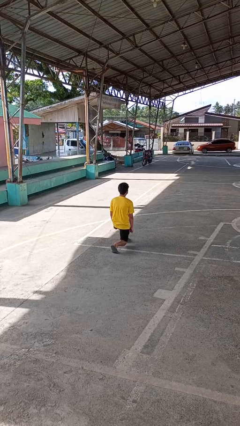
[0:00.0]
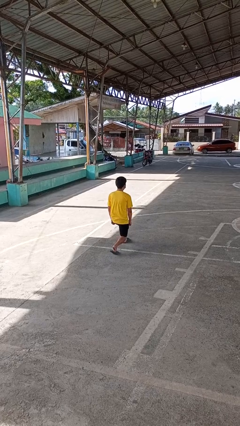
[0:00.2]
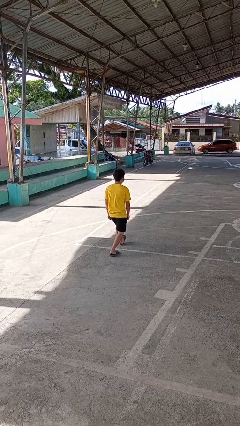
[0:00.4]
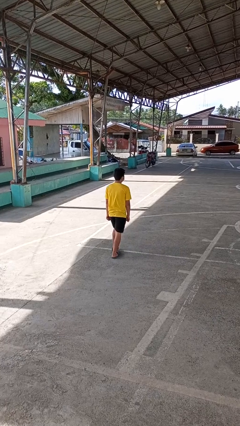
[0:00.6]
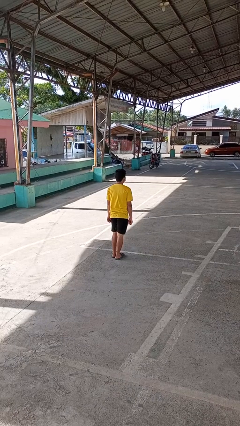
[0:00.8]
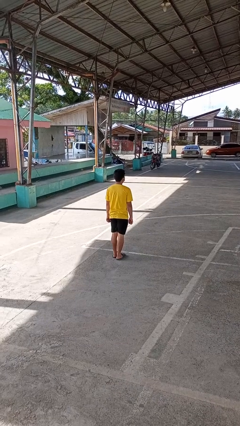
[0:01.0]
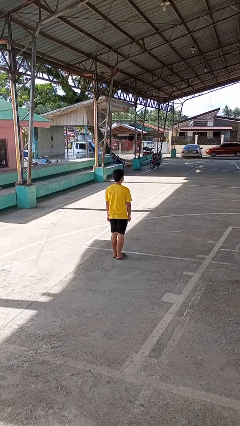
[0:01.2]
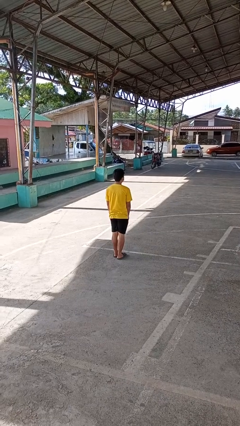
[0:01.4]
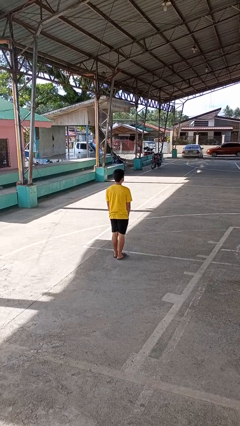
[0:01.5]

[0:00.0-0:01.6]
person stands up from floor

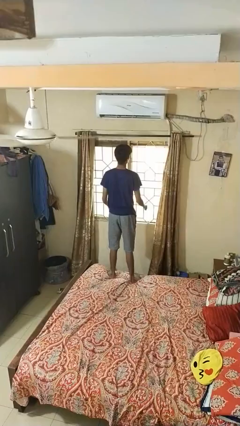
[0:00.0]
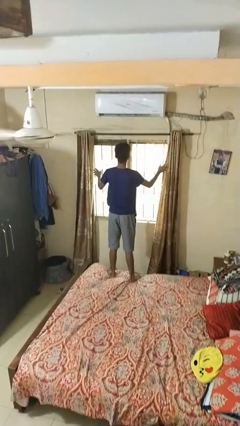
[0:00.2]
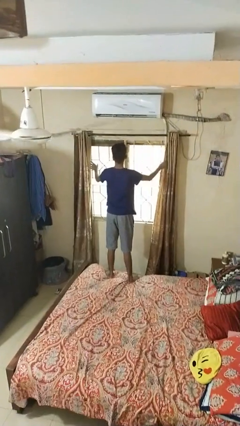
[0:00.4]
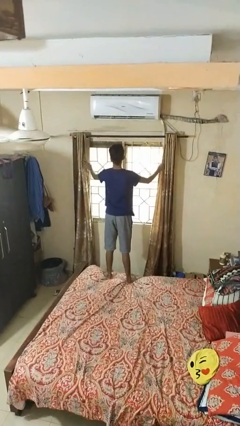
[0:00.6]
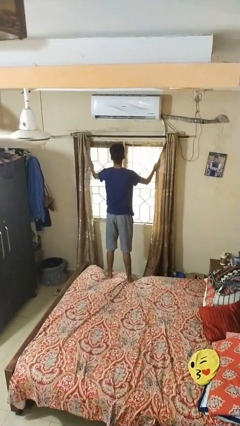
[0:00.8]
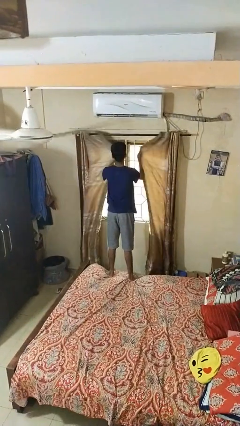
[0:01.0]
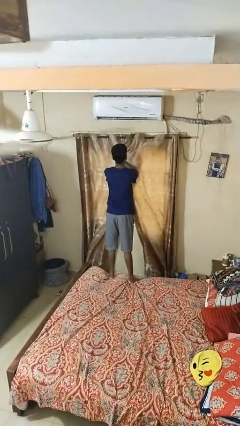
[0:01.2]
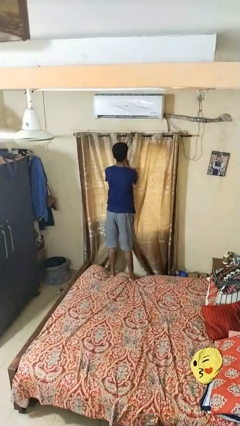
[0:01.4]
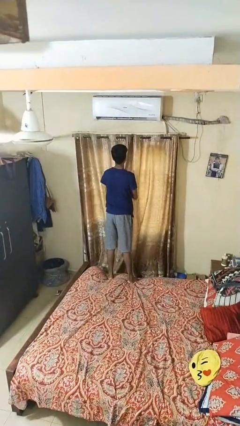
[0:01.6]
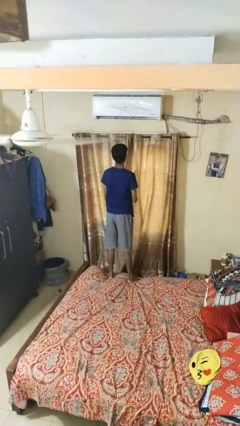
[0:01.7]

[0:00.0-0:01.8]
person closes curtains

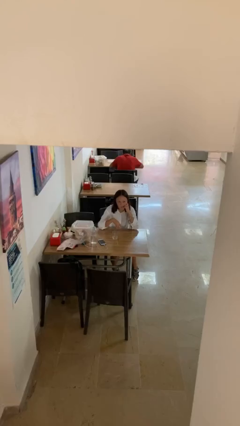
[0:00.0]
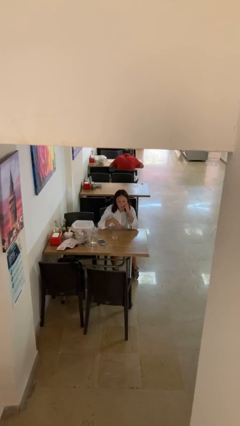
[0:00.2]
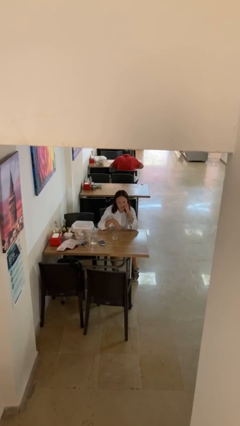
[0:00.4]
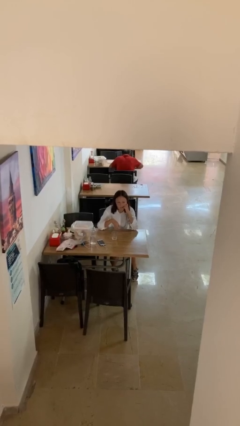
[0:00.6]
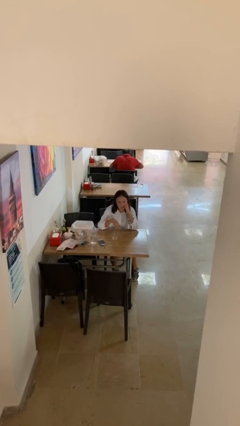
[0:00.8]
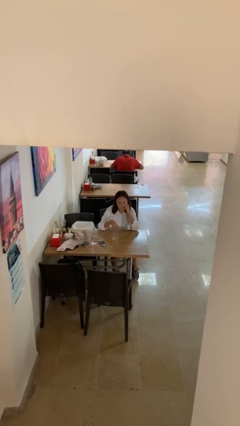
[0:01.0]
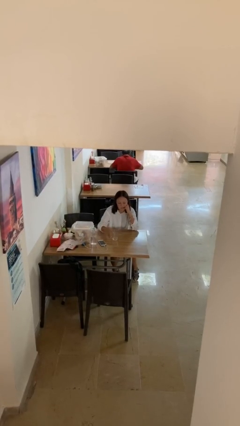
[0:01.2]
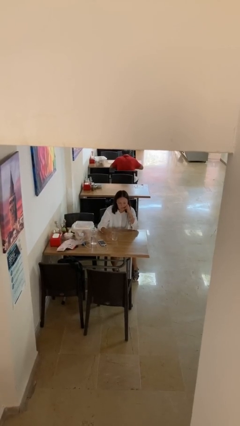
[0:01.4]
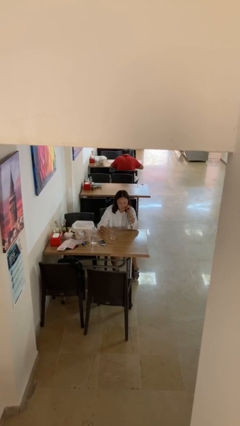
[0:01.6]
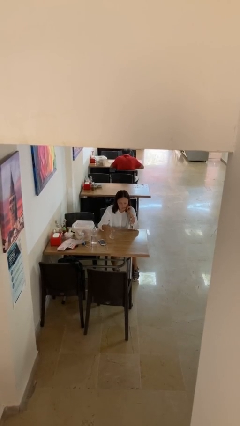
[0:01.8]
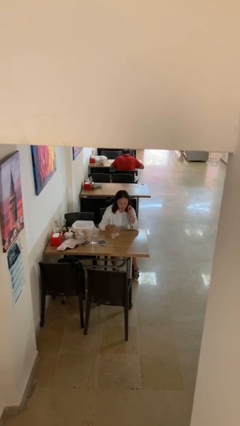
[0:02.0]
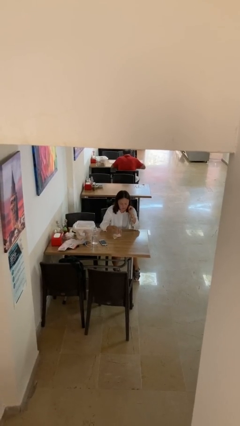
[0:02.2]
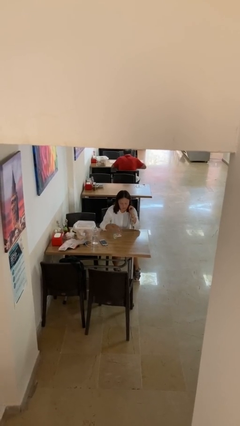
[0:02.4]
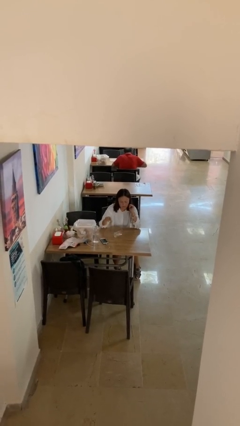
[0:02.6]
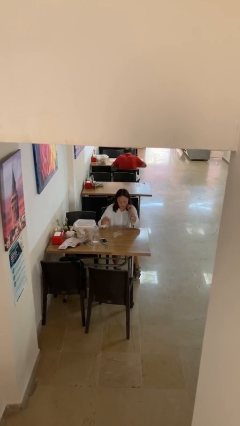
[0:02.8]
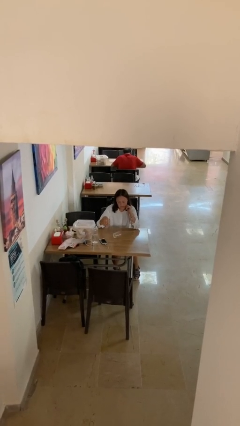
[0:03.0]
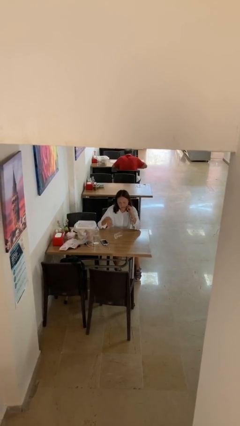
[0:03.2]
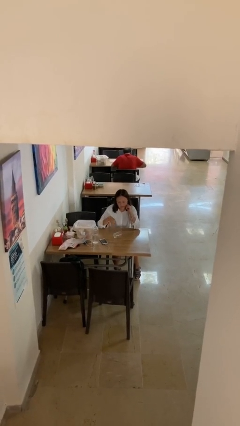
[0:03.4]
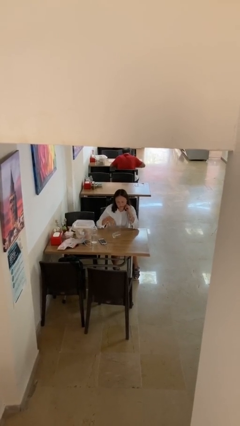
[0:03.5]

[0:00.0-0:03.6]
person knocks over glass

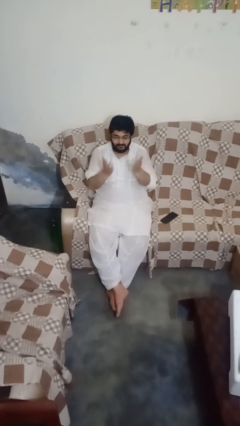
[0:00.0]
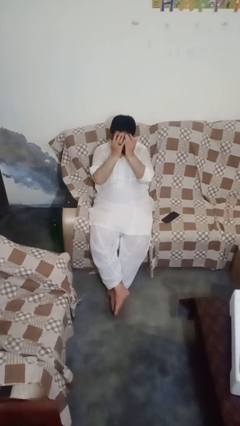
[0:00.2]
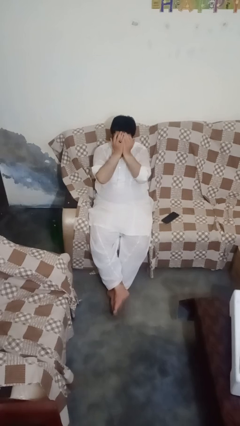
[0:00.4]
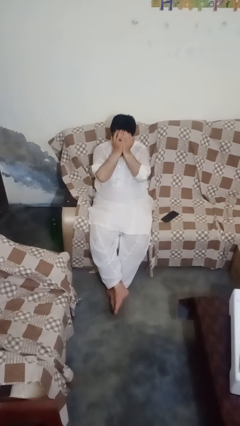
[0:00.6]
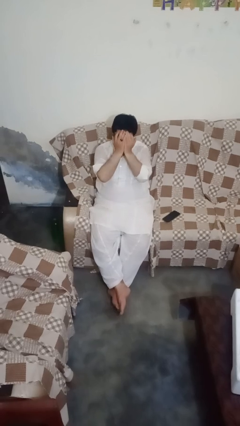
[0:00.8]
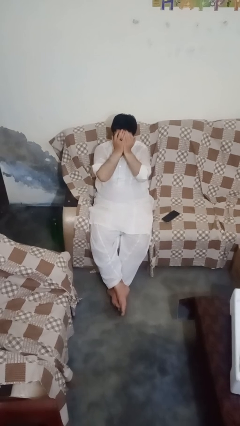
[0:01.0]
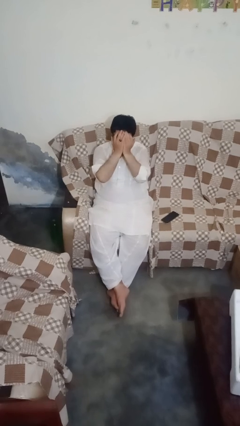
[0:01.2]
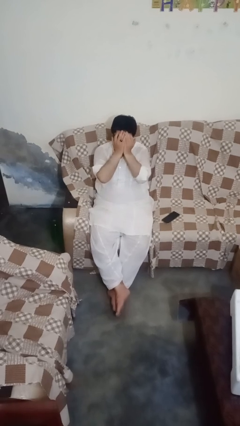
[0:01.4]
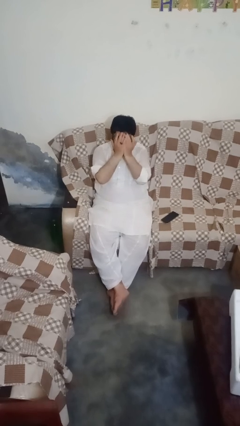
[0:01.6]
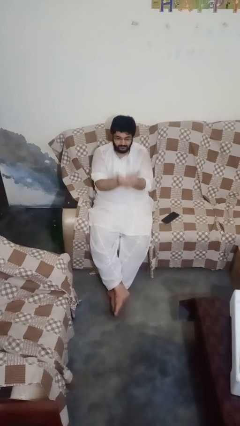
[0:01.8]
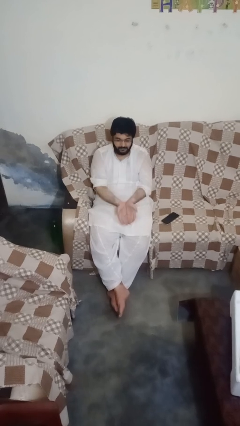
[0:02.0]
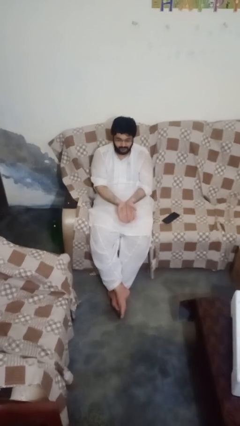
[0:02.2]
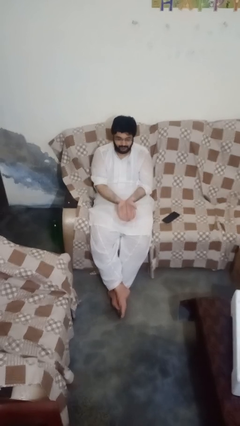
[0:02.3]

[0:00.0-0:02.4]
person covers face with hands

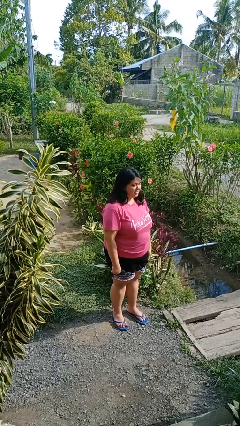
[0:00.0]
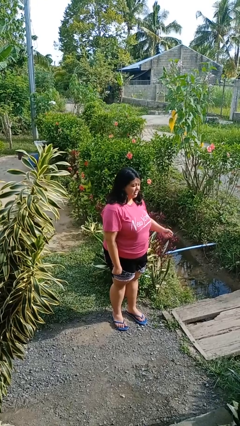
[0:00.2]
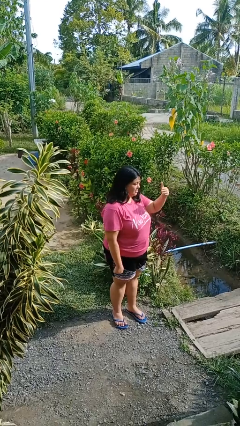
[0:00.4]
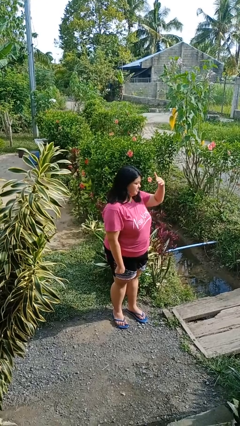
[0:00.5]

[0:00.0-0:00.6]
person shades eyes

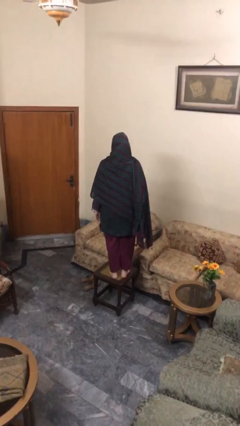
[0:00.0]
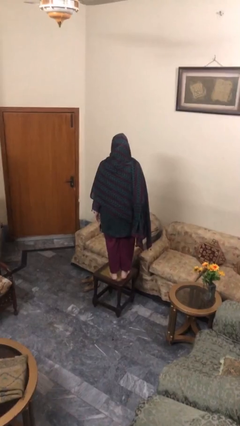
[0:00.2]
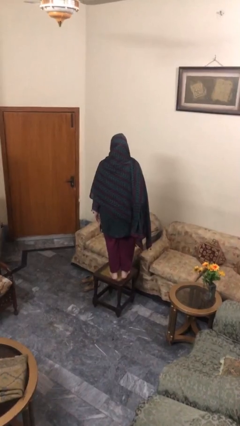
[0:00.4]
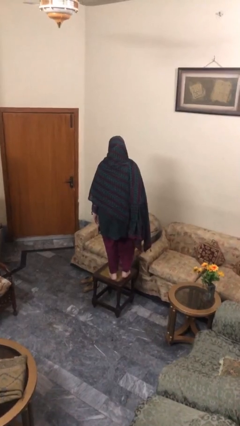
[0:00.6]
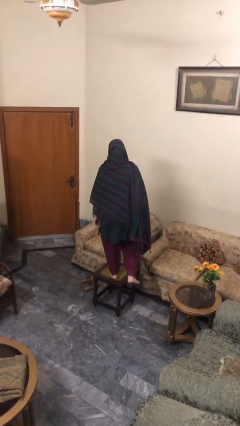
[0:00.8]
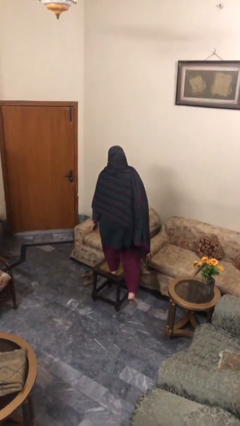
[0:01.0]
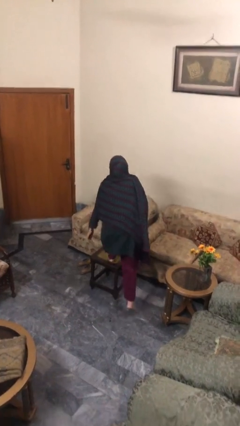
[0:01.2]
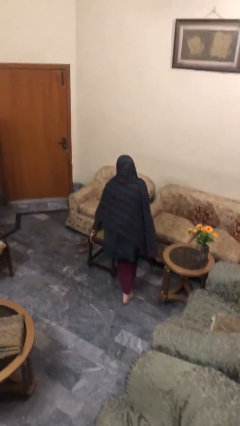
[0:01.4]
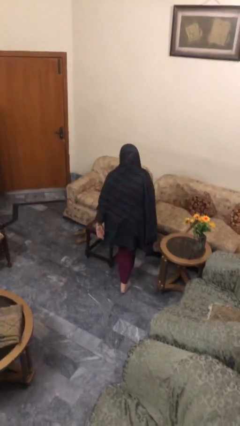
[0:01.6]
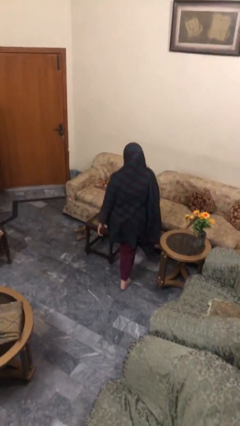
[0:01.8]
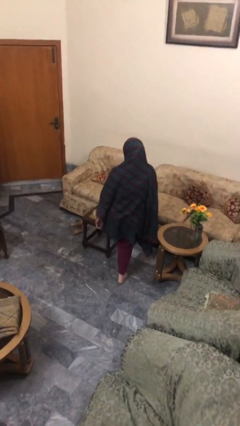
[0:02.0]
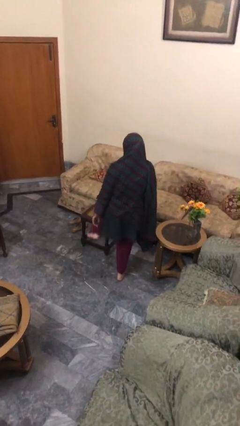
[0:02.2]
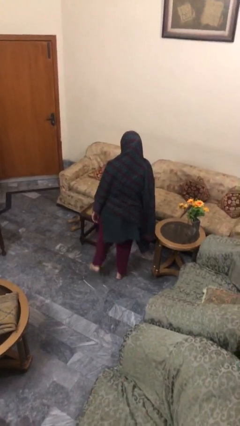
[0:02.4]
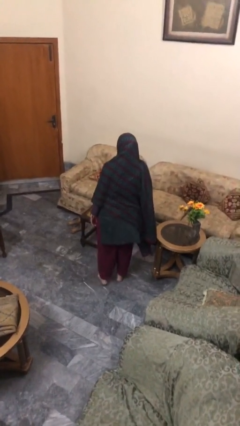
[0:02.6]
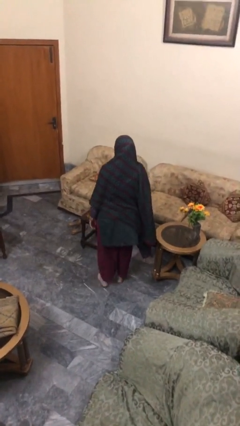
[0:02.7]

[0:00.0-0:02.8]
person climbs off table

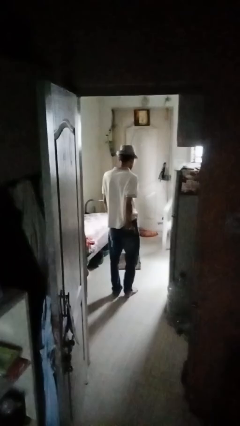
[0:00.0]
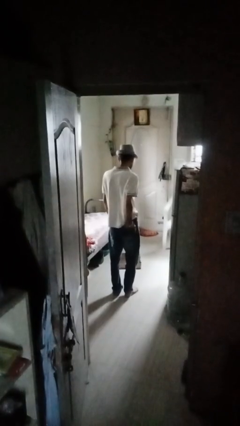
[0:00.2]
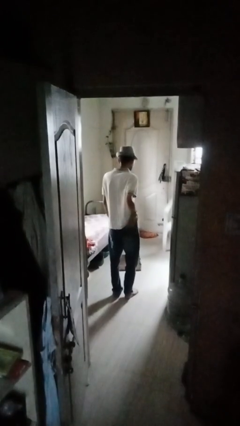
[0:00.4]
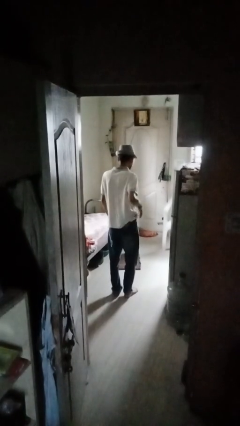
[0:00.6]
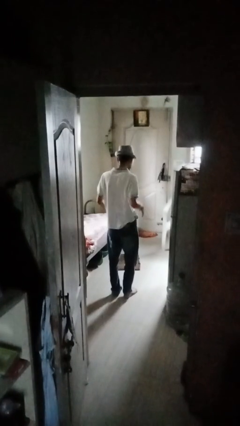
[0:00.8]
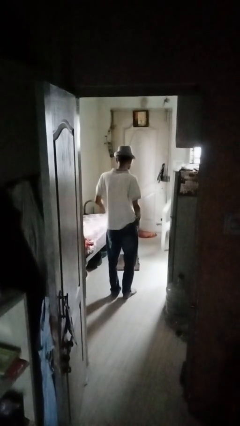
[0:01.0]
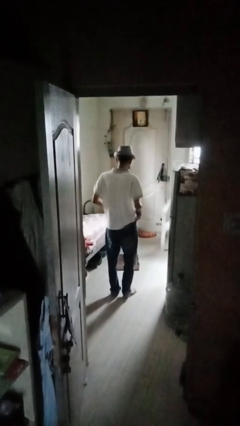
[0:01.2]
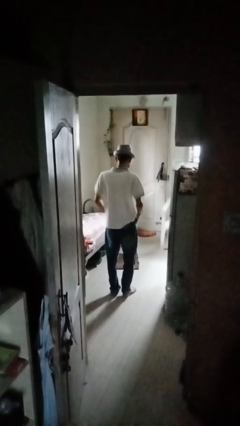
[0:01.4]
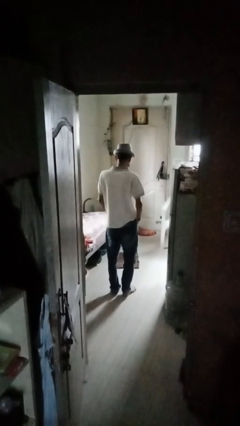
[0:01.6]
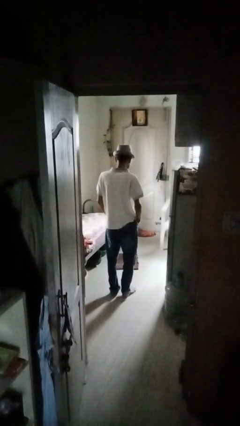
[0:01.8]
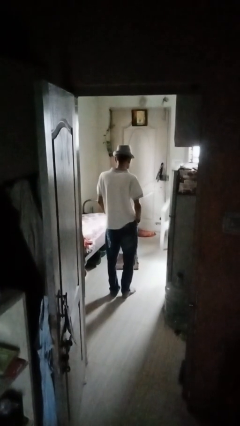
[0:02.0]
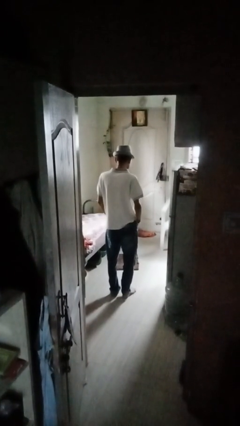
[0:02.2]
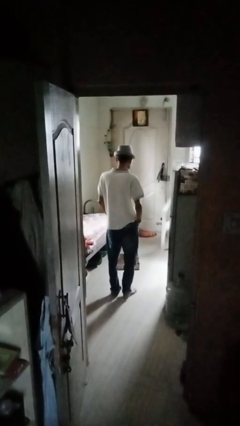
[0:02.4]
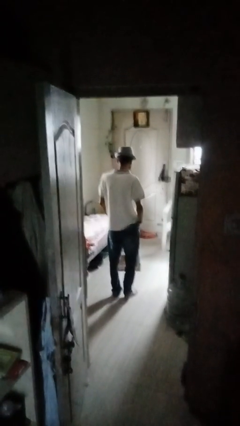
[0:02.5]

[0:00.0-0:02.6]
person puts hands in back pockets

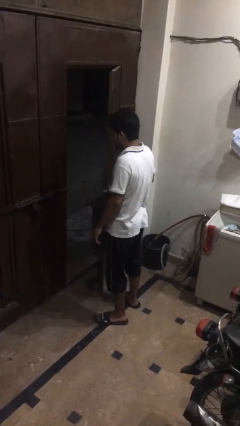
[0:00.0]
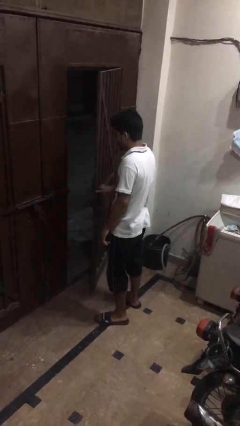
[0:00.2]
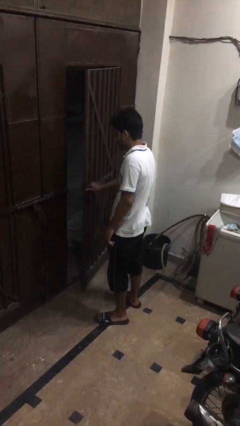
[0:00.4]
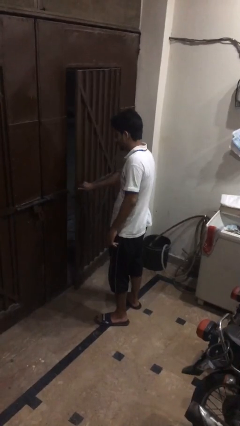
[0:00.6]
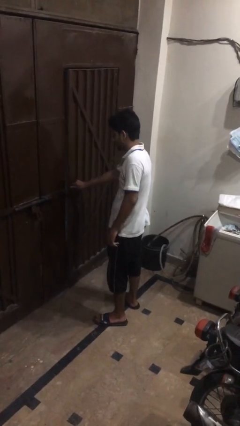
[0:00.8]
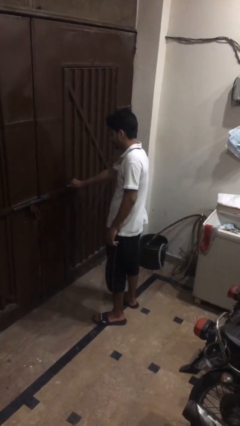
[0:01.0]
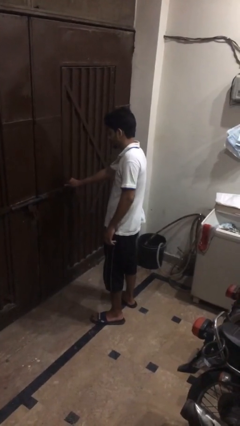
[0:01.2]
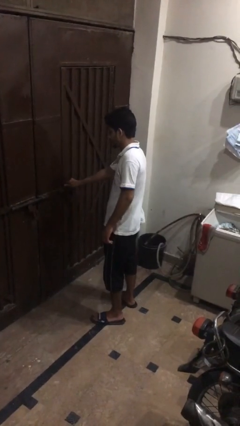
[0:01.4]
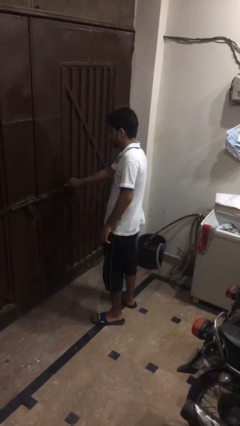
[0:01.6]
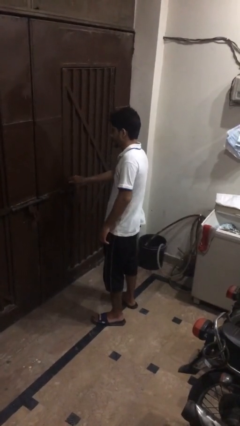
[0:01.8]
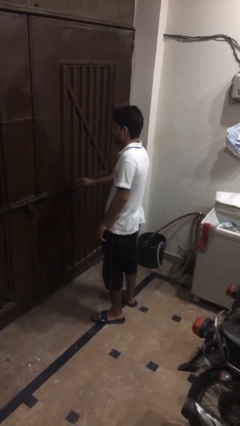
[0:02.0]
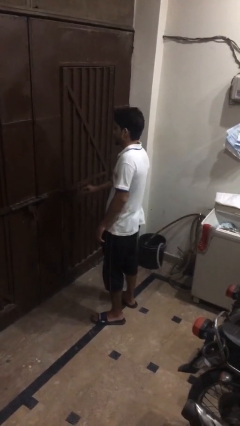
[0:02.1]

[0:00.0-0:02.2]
person closes gate
